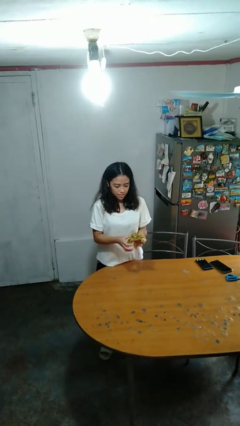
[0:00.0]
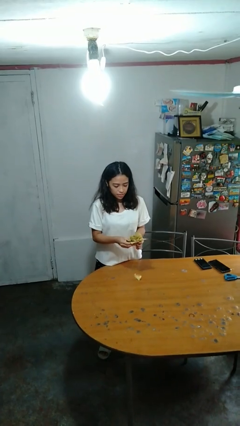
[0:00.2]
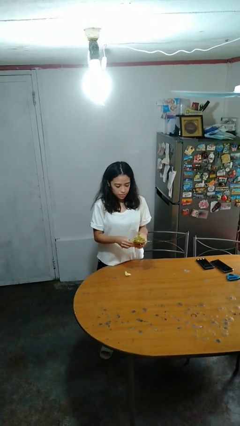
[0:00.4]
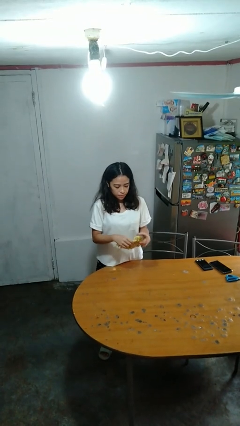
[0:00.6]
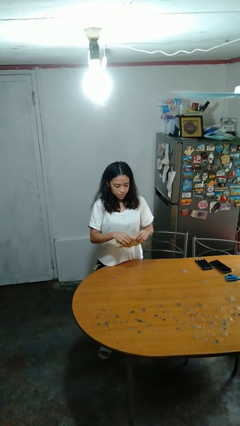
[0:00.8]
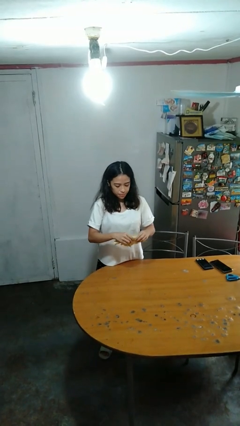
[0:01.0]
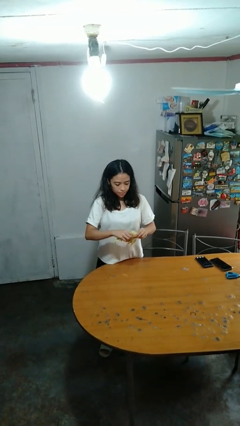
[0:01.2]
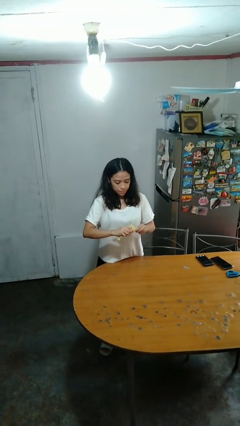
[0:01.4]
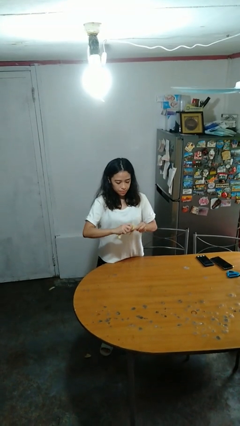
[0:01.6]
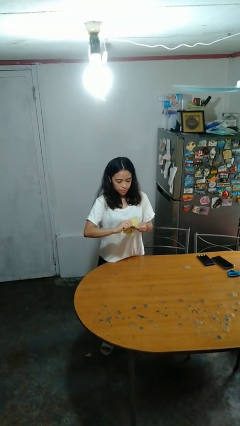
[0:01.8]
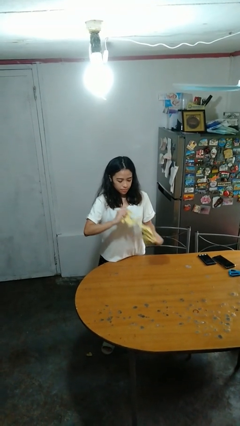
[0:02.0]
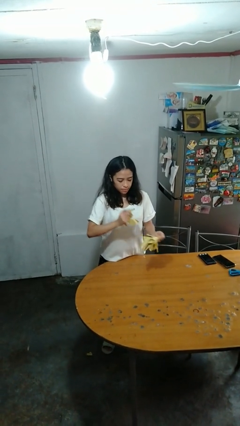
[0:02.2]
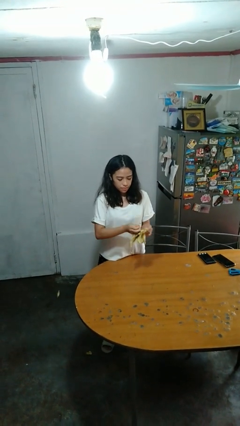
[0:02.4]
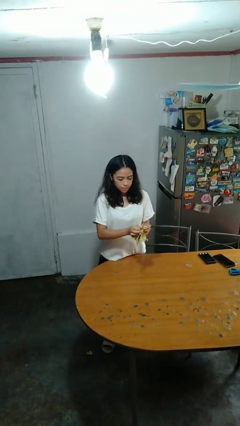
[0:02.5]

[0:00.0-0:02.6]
person tears paper

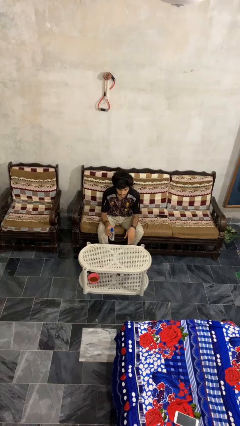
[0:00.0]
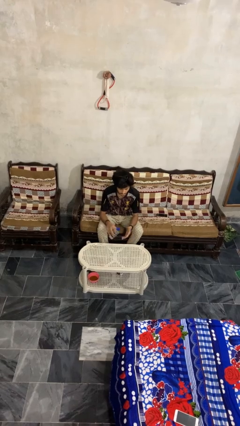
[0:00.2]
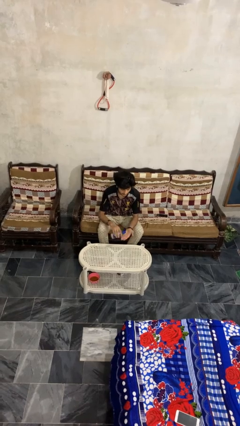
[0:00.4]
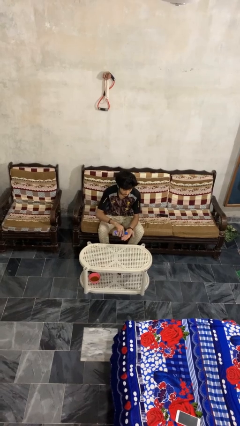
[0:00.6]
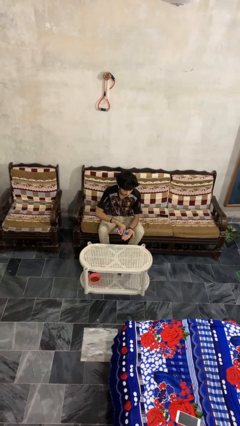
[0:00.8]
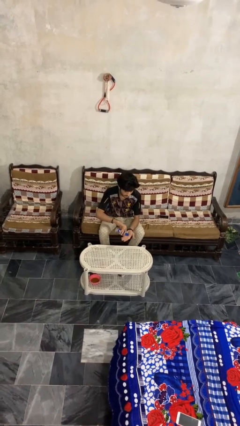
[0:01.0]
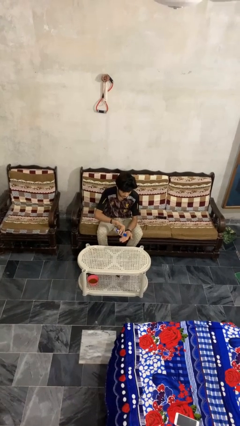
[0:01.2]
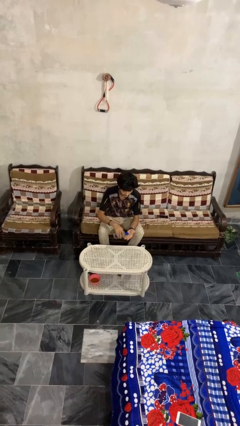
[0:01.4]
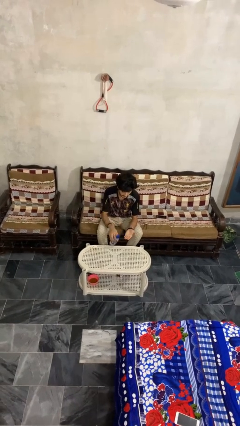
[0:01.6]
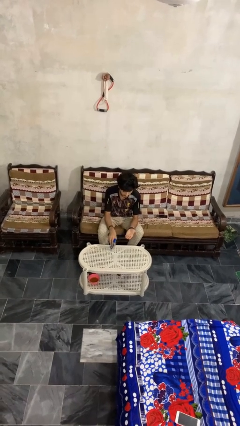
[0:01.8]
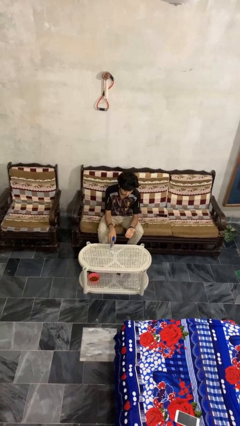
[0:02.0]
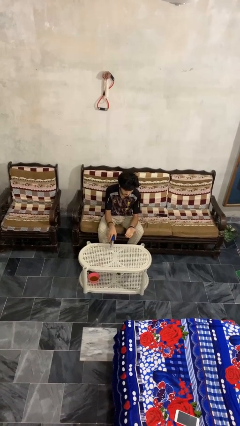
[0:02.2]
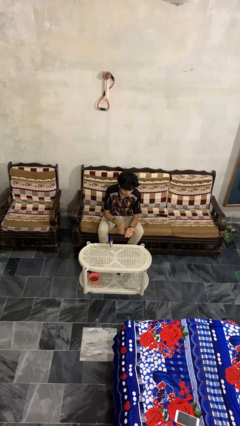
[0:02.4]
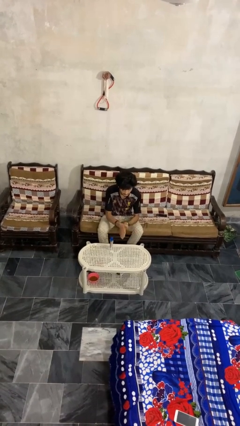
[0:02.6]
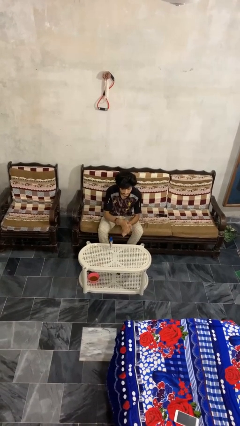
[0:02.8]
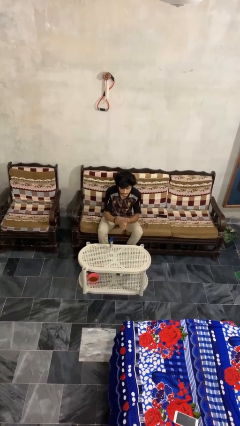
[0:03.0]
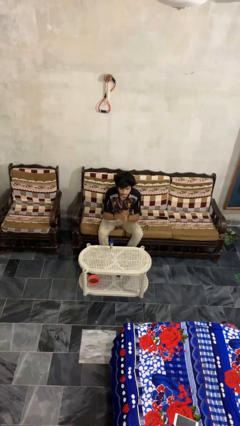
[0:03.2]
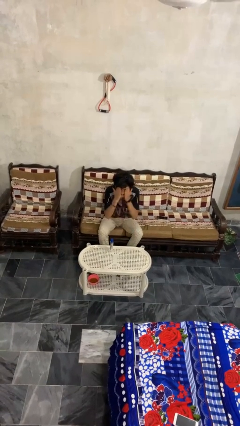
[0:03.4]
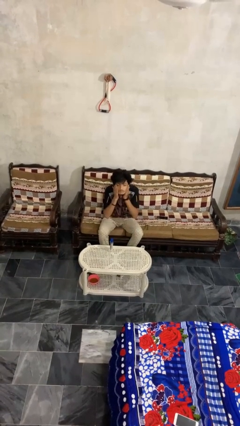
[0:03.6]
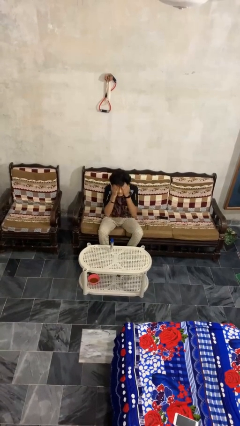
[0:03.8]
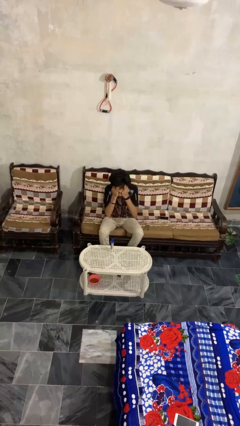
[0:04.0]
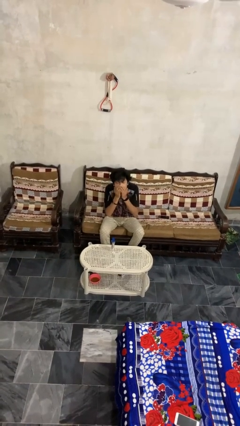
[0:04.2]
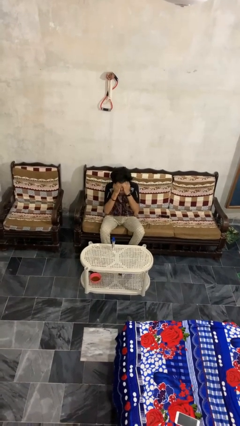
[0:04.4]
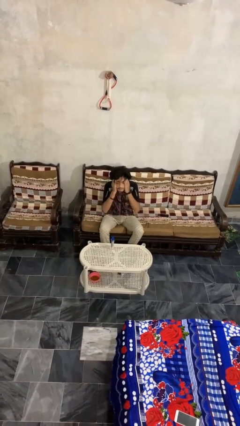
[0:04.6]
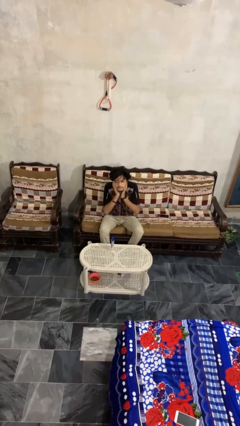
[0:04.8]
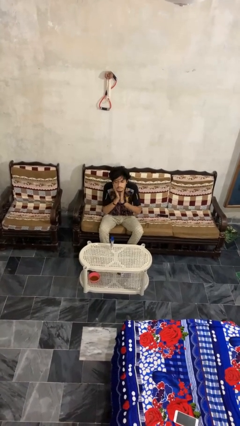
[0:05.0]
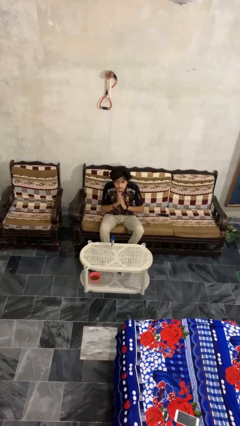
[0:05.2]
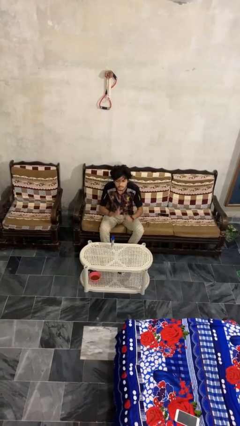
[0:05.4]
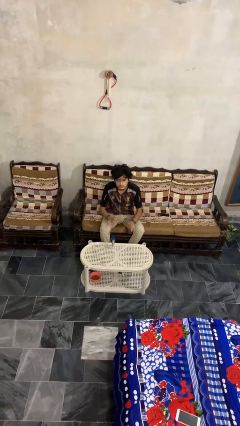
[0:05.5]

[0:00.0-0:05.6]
person applies facial moisturizer

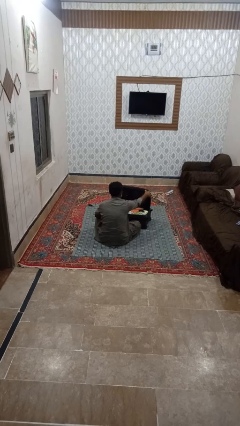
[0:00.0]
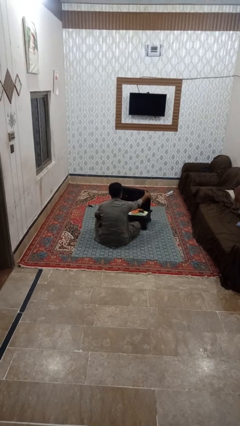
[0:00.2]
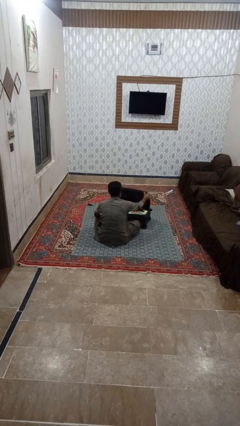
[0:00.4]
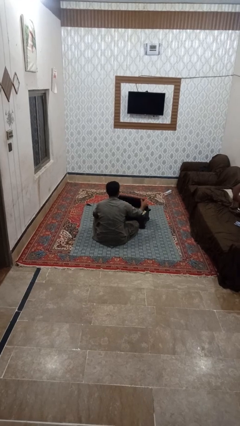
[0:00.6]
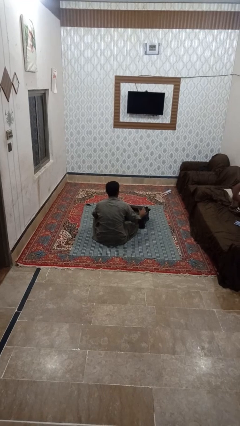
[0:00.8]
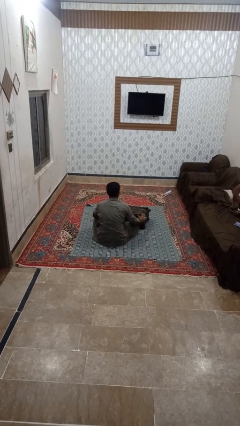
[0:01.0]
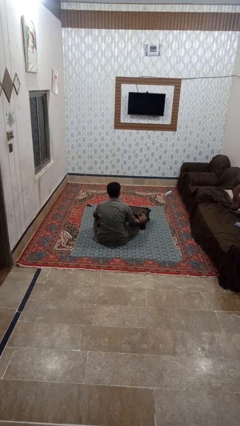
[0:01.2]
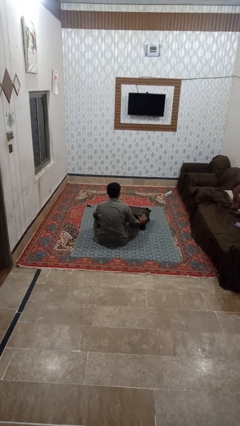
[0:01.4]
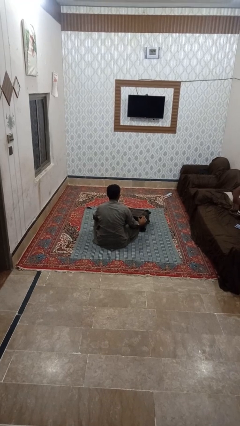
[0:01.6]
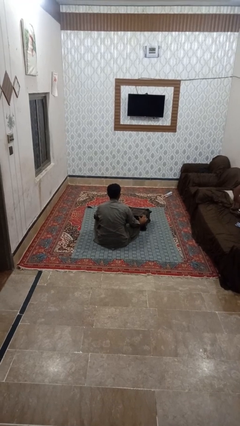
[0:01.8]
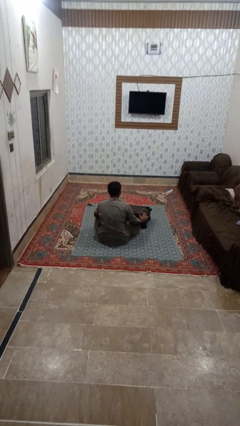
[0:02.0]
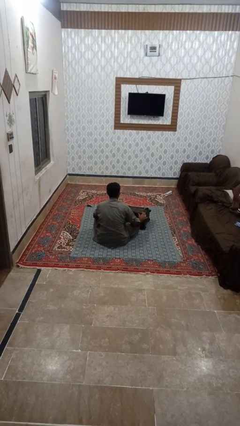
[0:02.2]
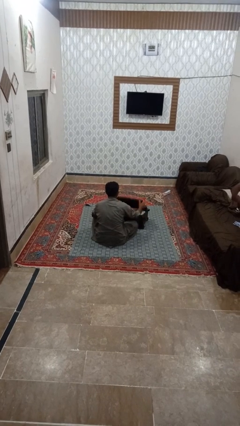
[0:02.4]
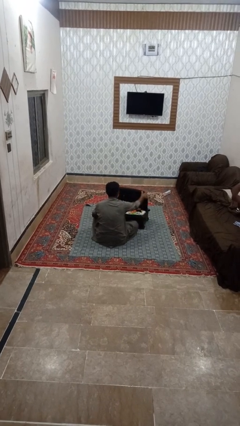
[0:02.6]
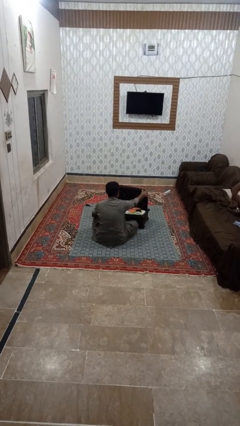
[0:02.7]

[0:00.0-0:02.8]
person closes suitcase

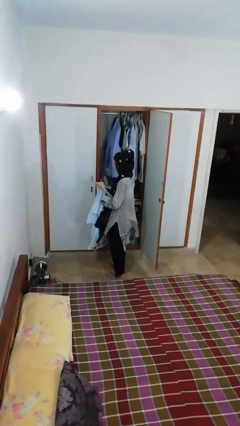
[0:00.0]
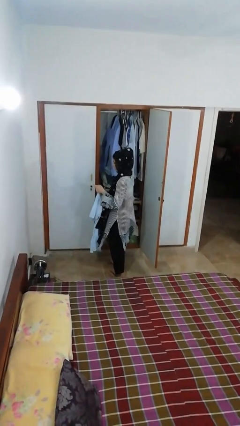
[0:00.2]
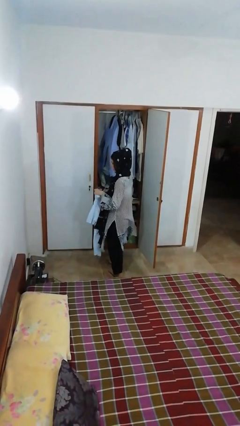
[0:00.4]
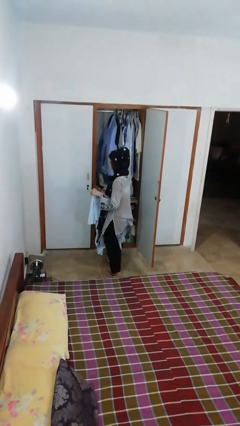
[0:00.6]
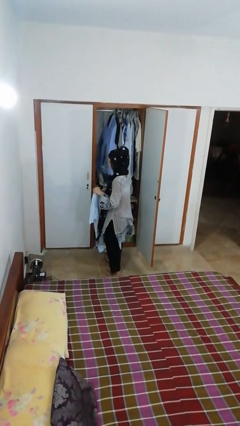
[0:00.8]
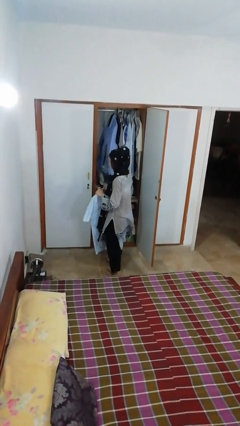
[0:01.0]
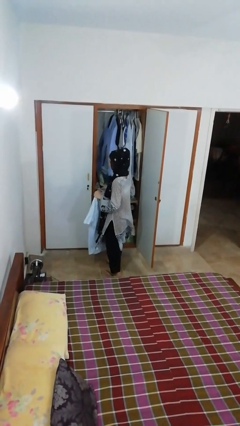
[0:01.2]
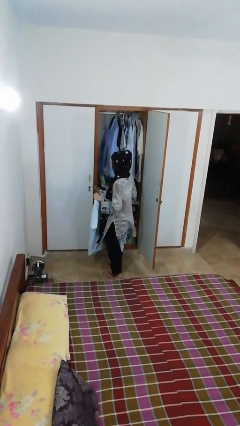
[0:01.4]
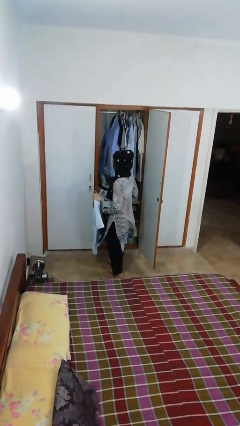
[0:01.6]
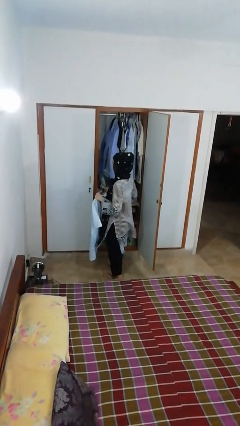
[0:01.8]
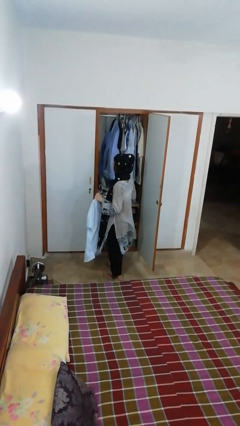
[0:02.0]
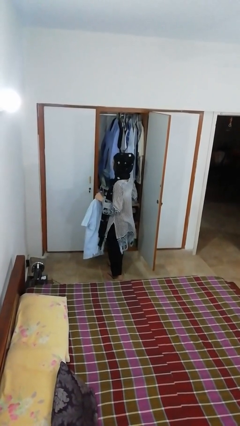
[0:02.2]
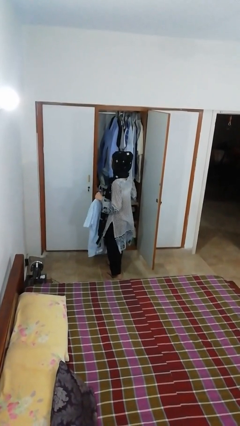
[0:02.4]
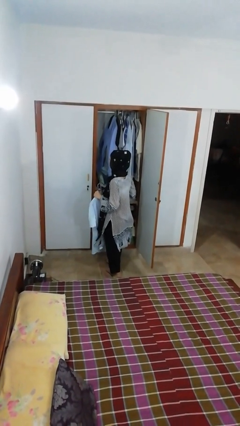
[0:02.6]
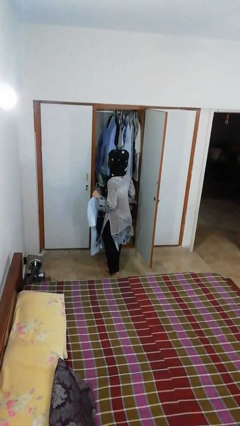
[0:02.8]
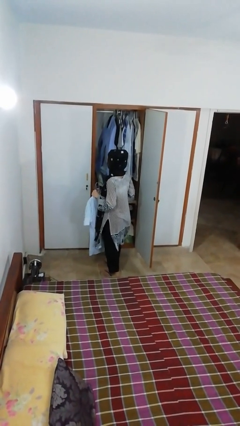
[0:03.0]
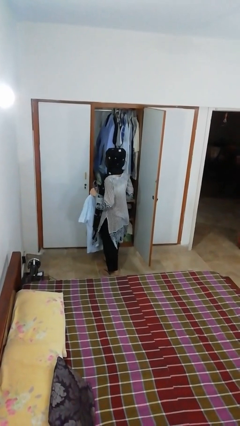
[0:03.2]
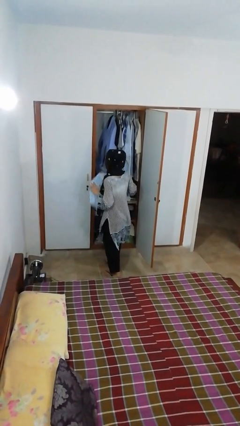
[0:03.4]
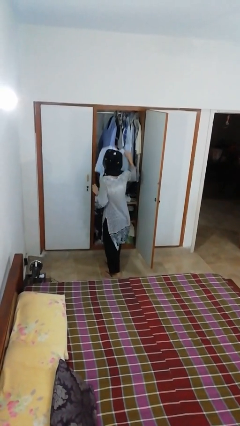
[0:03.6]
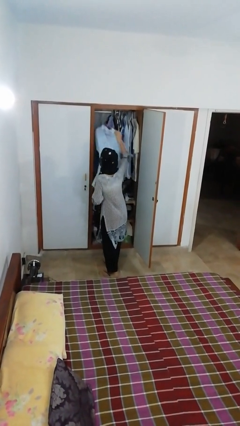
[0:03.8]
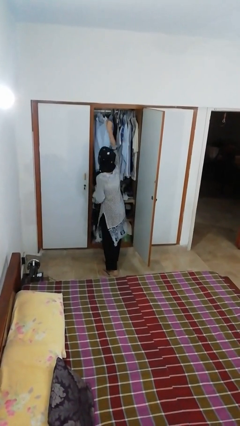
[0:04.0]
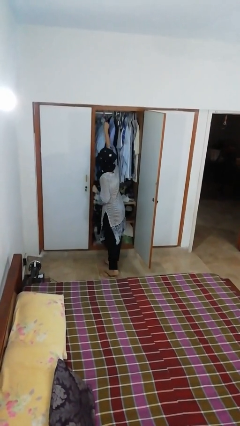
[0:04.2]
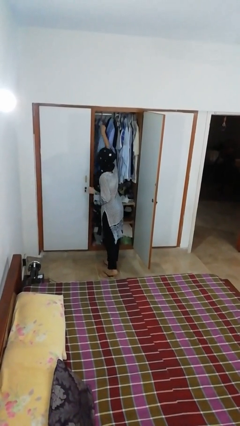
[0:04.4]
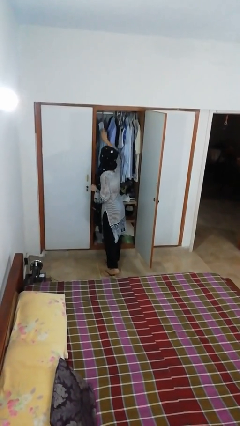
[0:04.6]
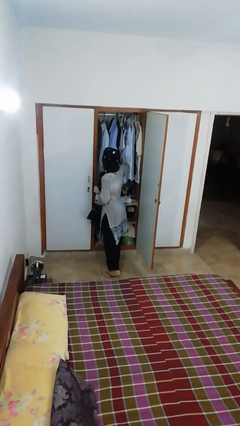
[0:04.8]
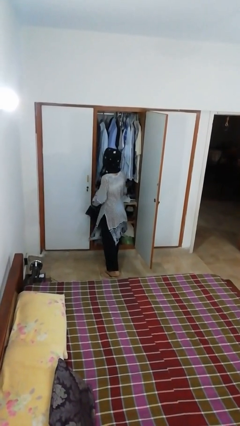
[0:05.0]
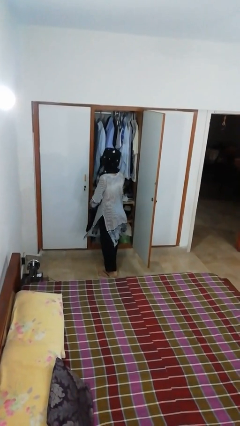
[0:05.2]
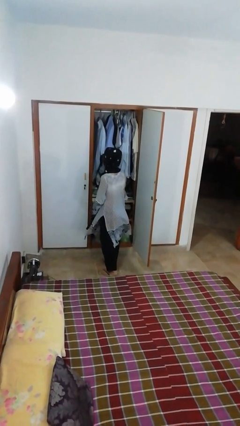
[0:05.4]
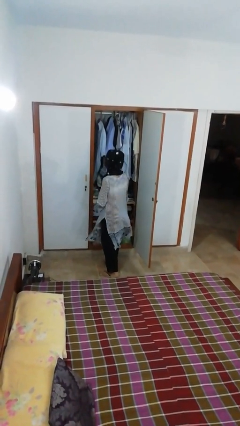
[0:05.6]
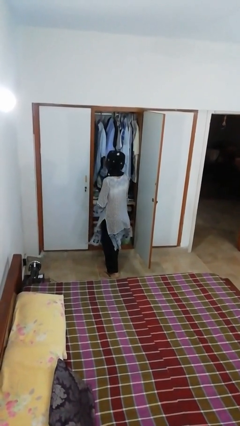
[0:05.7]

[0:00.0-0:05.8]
person puts clothes into closet

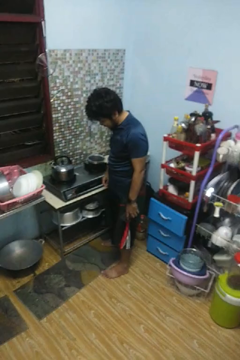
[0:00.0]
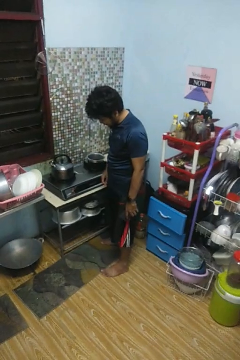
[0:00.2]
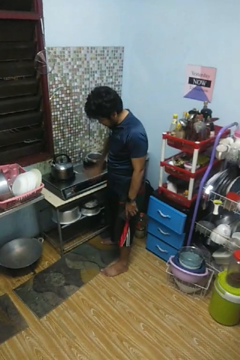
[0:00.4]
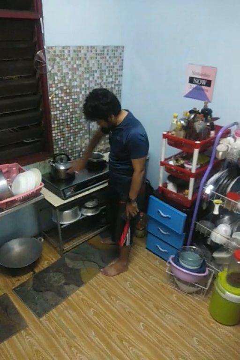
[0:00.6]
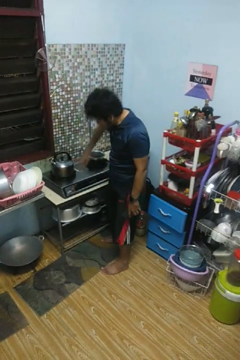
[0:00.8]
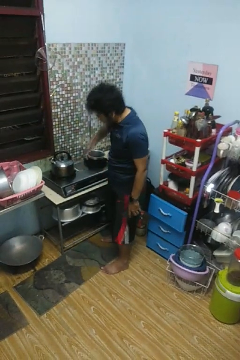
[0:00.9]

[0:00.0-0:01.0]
person burns hand
